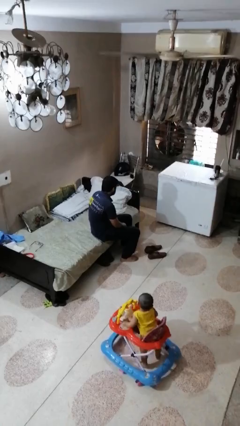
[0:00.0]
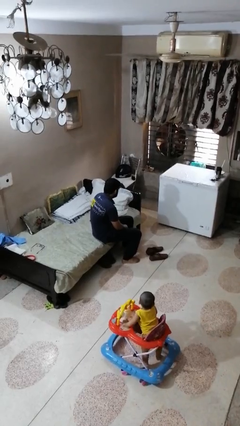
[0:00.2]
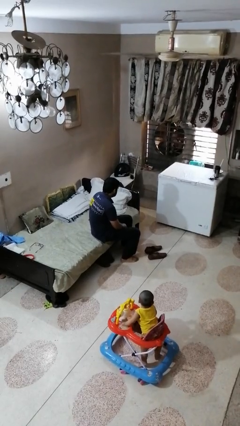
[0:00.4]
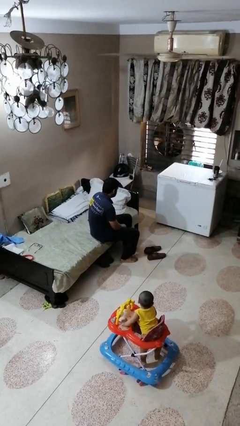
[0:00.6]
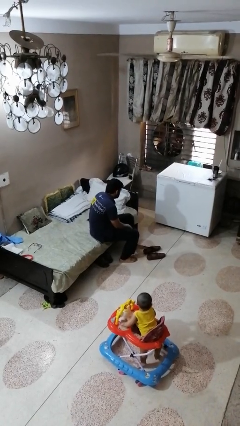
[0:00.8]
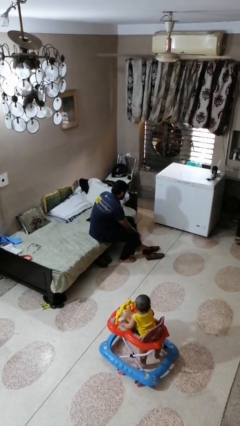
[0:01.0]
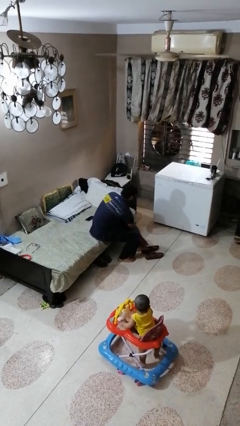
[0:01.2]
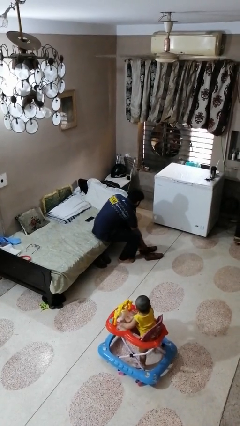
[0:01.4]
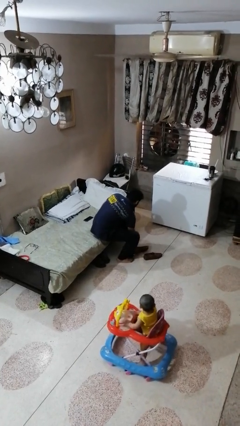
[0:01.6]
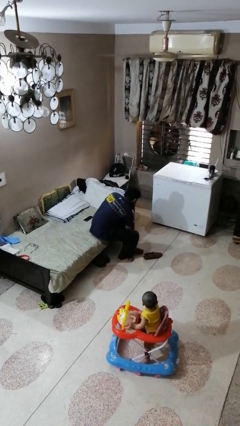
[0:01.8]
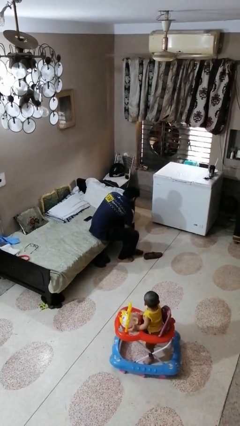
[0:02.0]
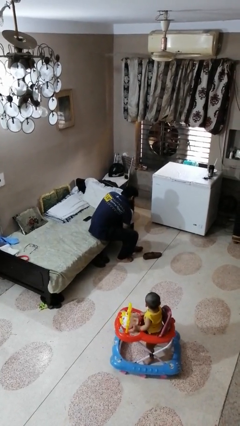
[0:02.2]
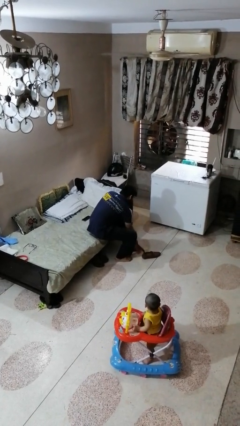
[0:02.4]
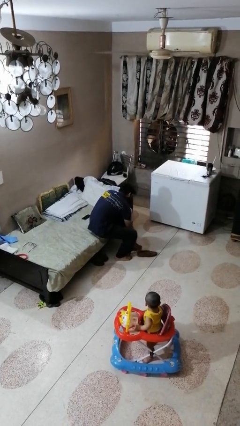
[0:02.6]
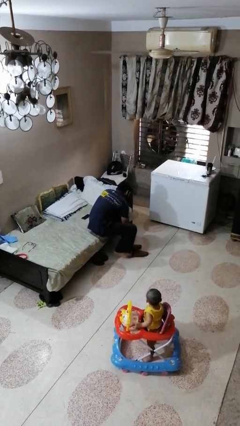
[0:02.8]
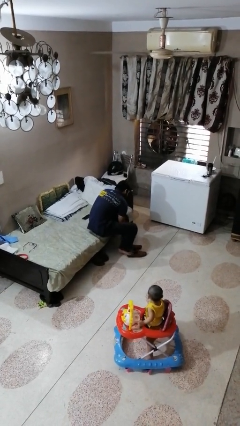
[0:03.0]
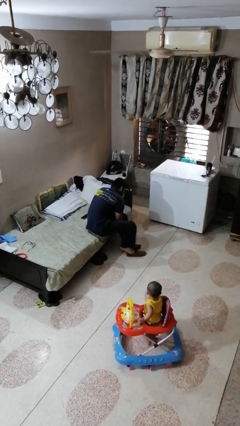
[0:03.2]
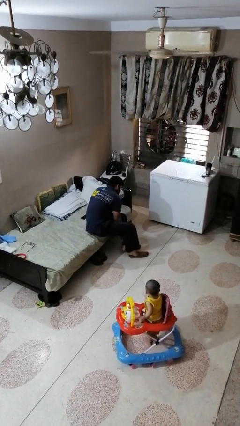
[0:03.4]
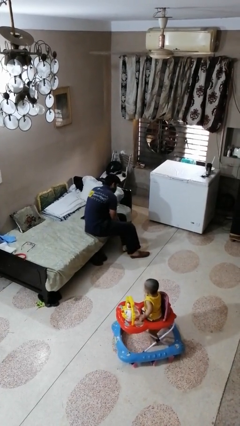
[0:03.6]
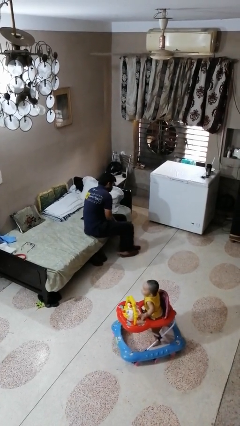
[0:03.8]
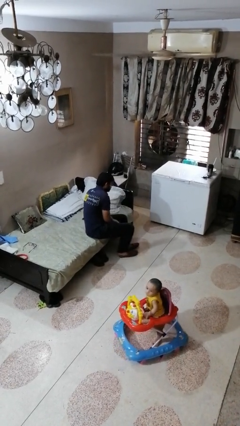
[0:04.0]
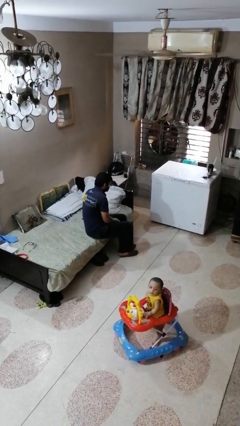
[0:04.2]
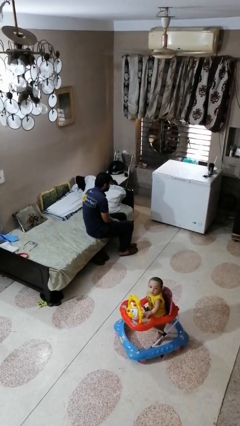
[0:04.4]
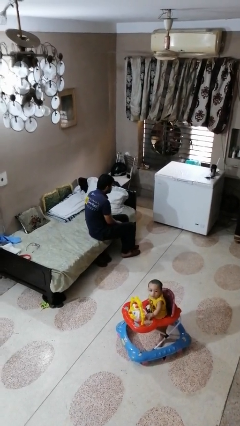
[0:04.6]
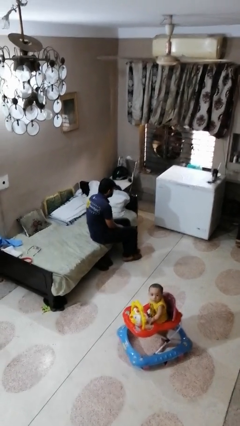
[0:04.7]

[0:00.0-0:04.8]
person puts on shoes

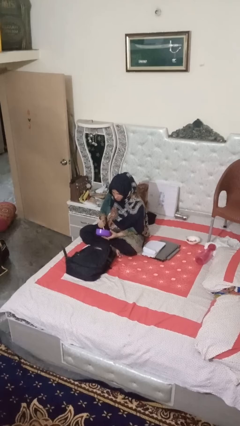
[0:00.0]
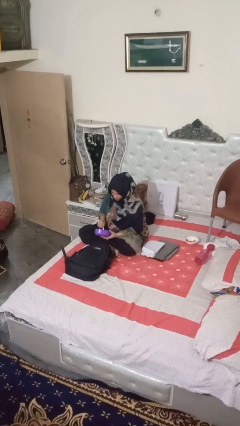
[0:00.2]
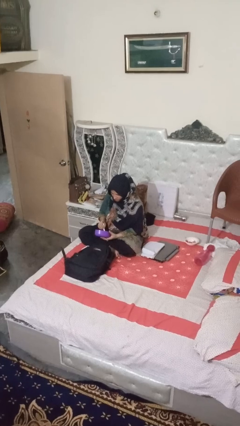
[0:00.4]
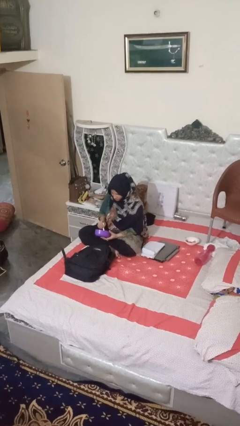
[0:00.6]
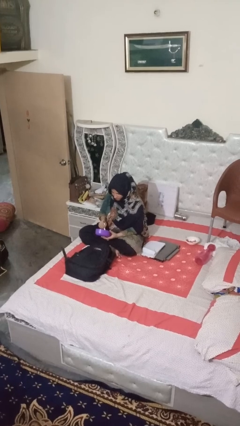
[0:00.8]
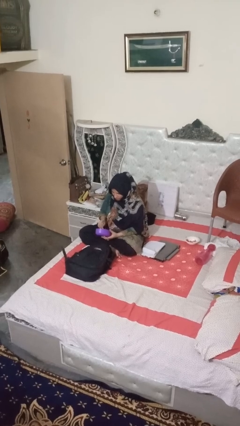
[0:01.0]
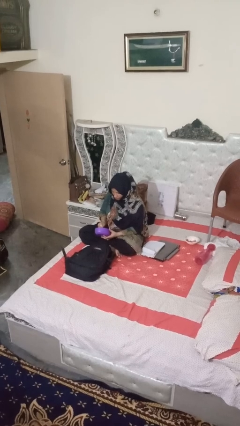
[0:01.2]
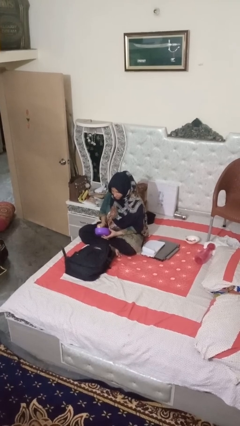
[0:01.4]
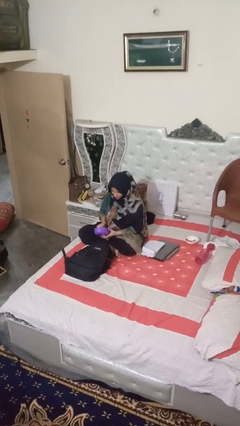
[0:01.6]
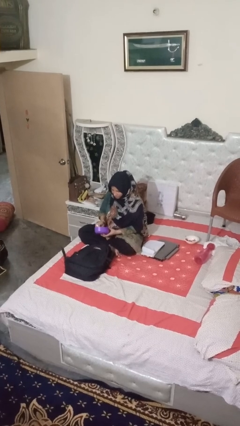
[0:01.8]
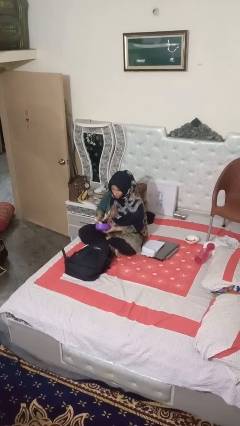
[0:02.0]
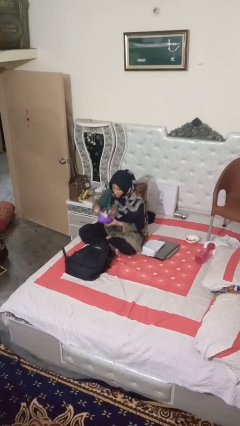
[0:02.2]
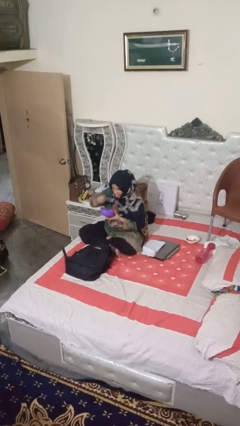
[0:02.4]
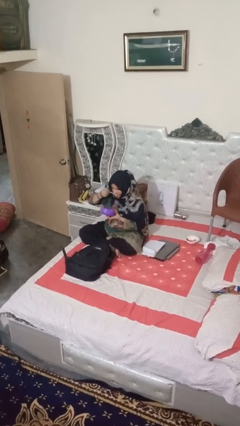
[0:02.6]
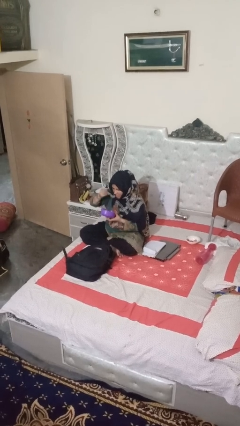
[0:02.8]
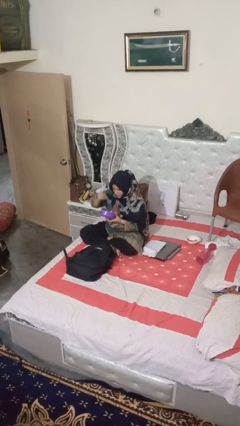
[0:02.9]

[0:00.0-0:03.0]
person eats snack from bag

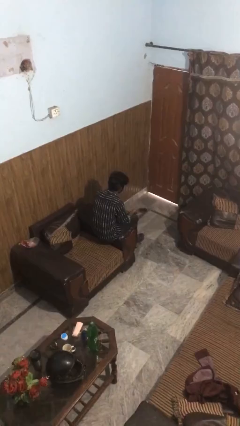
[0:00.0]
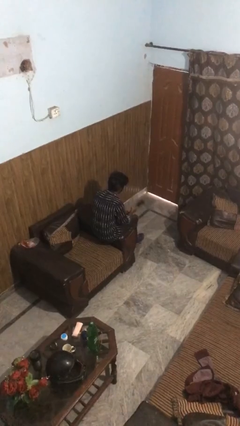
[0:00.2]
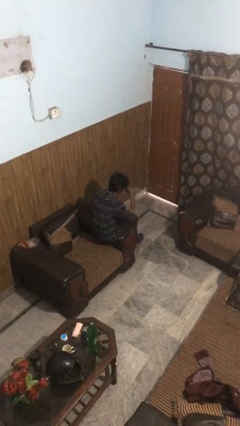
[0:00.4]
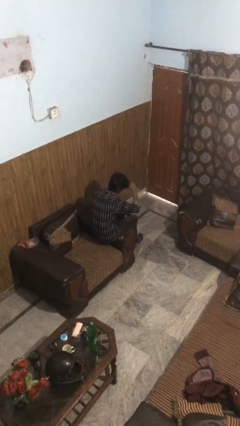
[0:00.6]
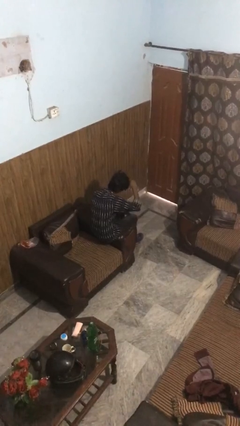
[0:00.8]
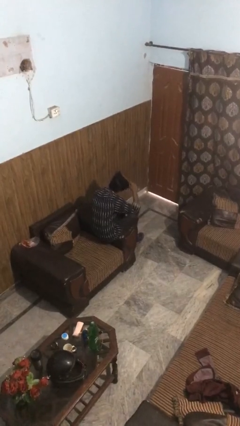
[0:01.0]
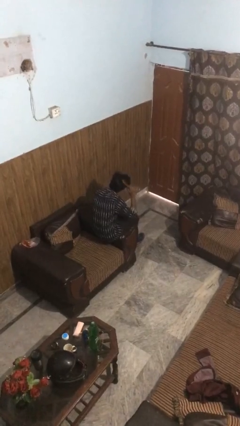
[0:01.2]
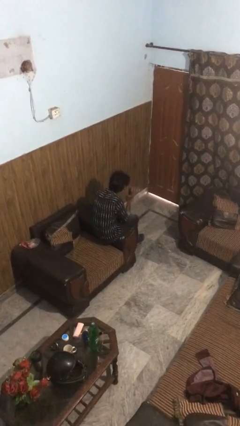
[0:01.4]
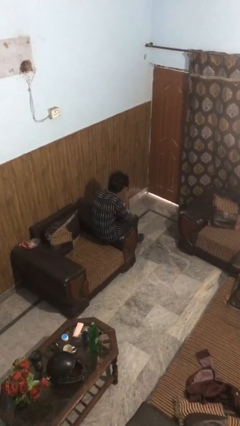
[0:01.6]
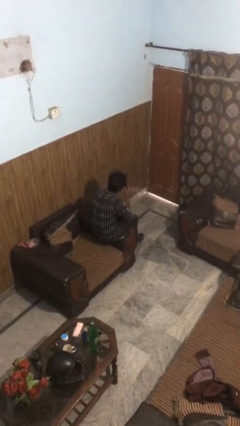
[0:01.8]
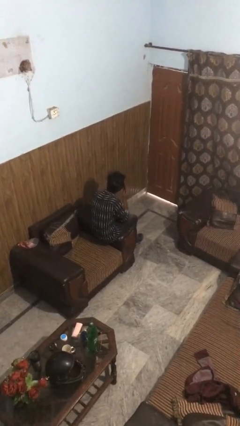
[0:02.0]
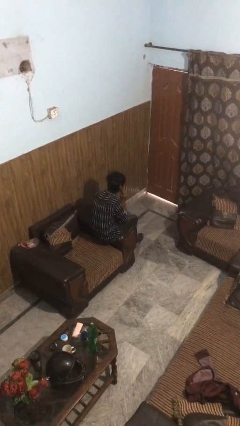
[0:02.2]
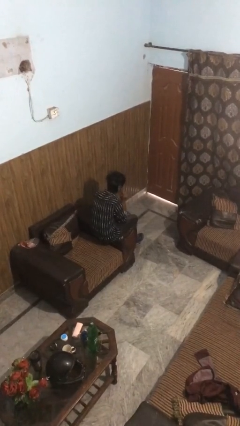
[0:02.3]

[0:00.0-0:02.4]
person brushes hair

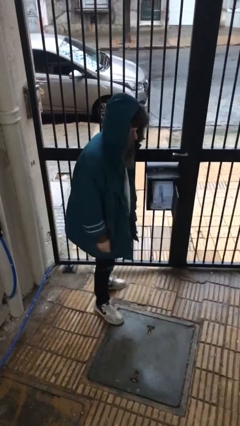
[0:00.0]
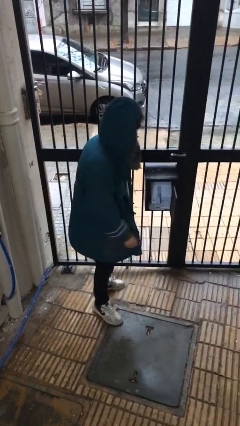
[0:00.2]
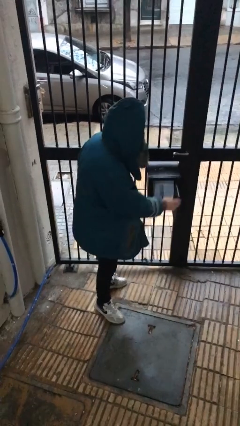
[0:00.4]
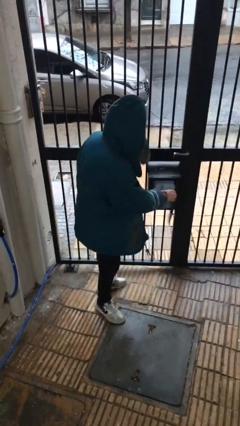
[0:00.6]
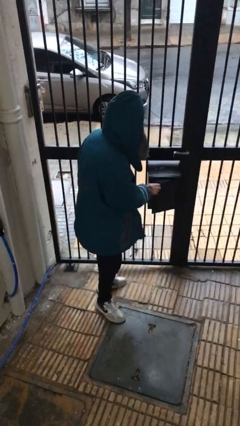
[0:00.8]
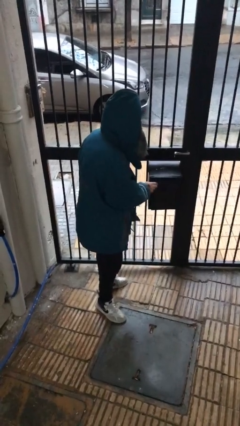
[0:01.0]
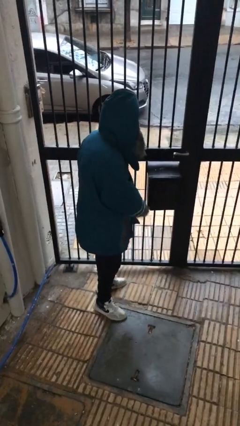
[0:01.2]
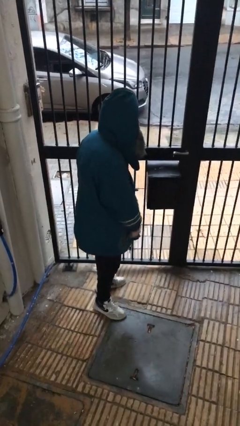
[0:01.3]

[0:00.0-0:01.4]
person closes mailbox

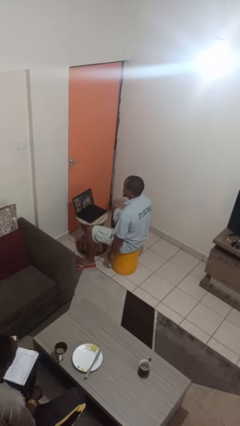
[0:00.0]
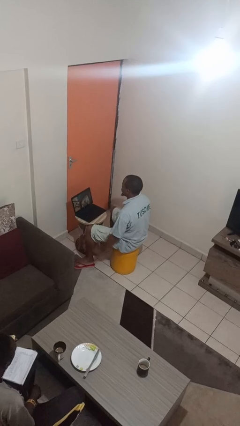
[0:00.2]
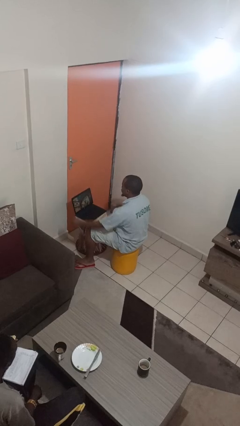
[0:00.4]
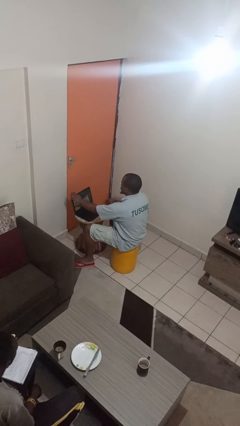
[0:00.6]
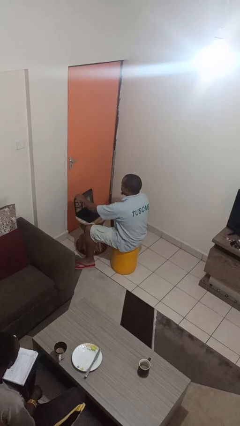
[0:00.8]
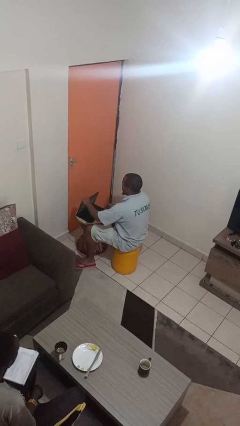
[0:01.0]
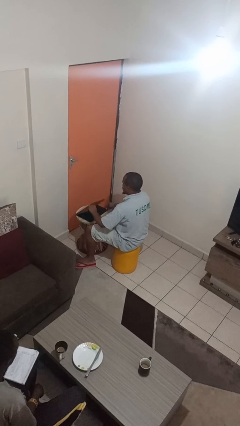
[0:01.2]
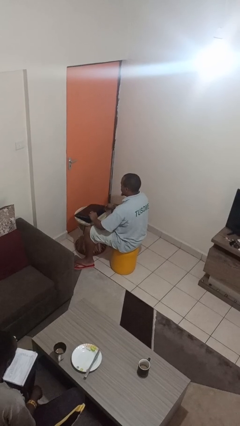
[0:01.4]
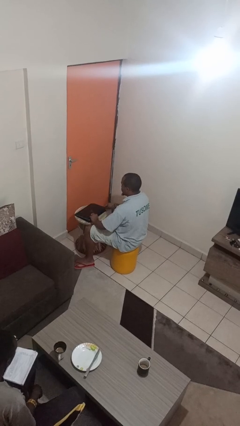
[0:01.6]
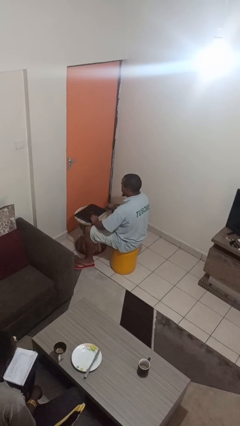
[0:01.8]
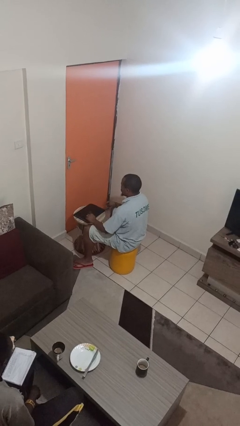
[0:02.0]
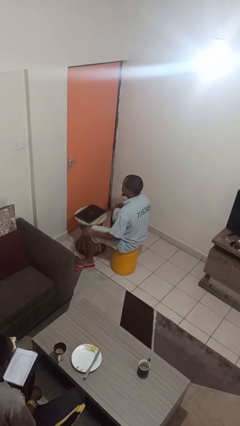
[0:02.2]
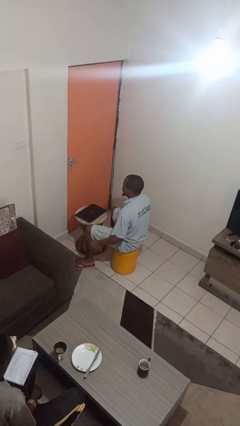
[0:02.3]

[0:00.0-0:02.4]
person closes laptop

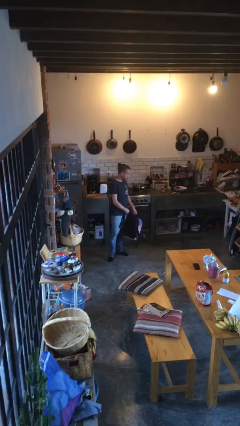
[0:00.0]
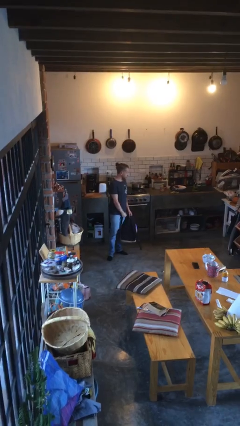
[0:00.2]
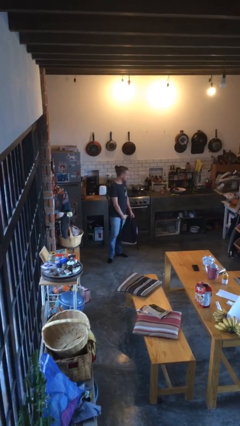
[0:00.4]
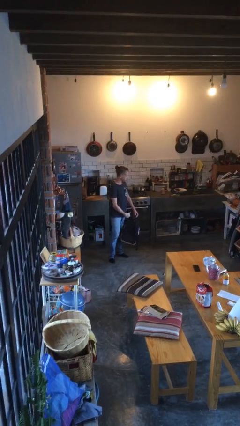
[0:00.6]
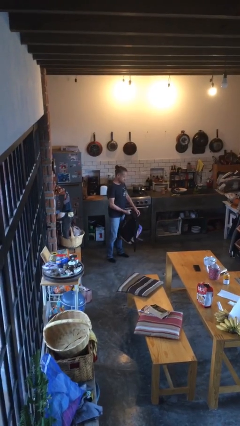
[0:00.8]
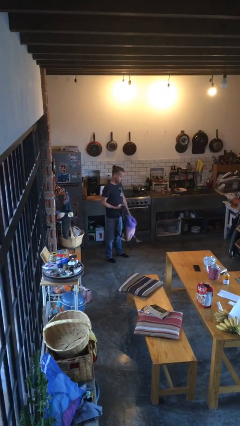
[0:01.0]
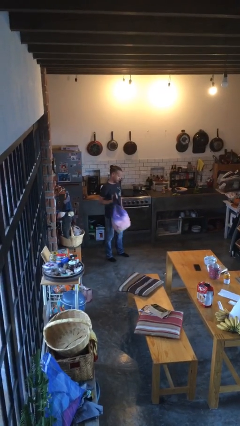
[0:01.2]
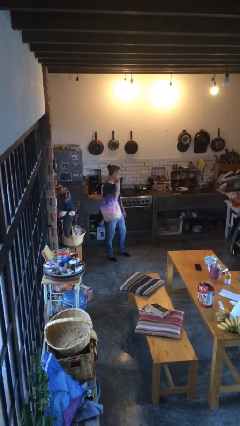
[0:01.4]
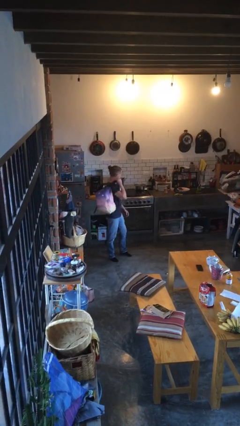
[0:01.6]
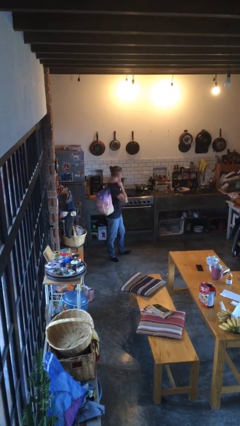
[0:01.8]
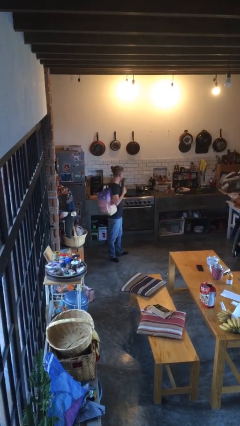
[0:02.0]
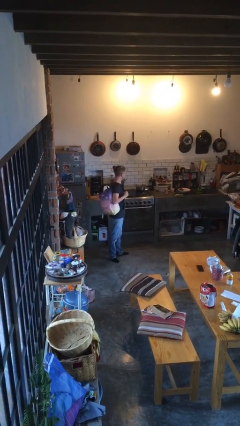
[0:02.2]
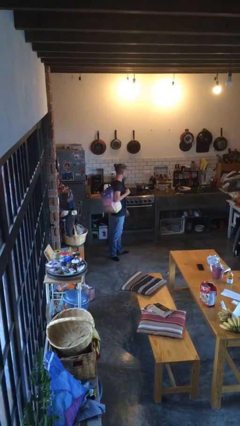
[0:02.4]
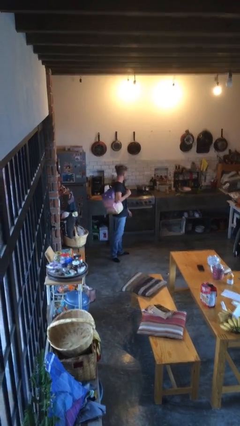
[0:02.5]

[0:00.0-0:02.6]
person puts on backpack

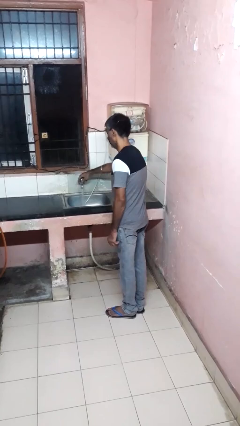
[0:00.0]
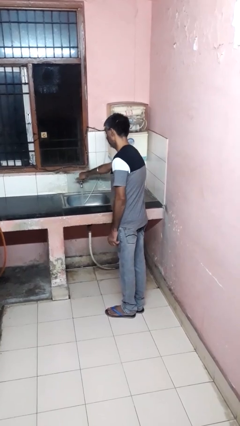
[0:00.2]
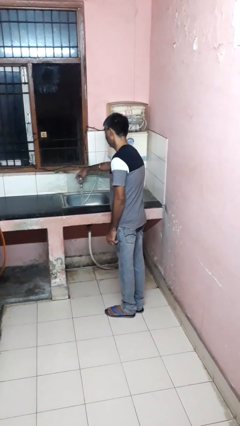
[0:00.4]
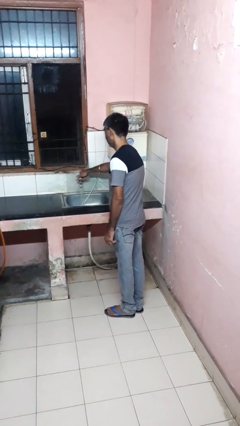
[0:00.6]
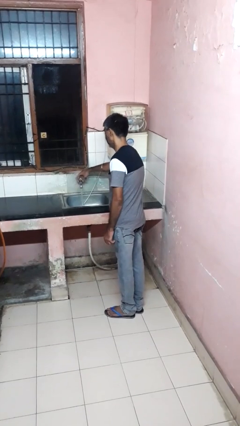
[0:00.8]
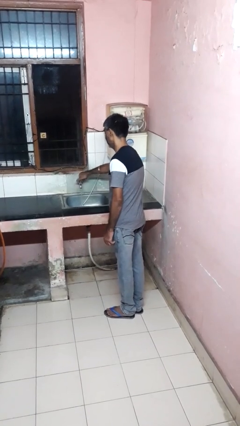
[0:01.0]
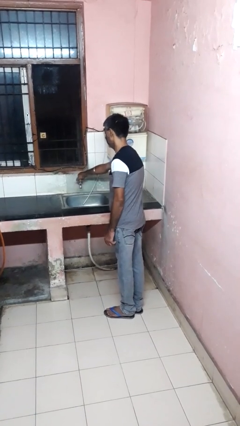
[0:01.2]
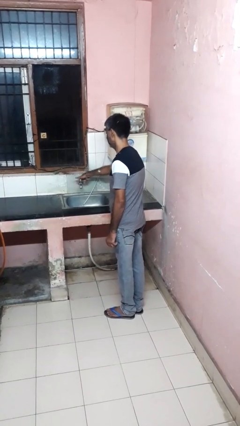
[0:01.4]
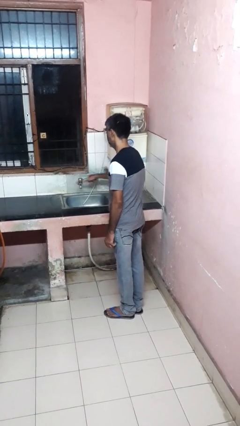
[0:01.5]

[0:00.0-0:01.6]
person turns off faucet
